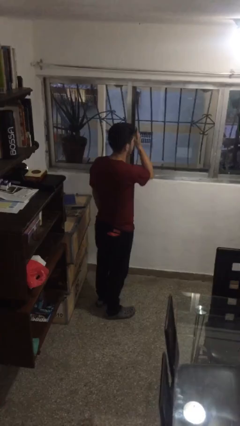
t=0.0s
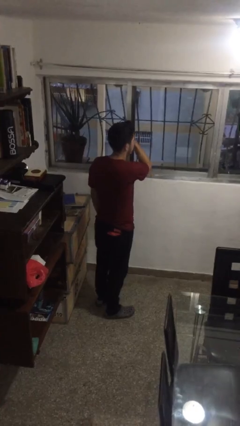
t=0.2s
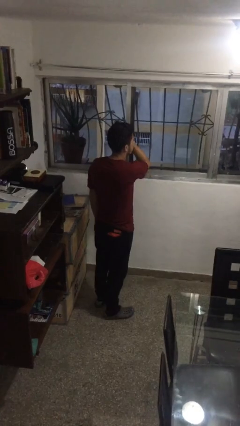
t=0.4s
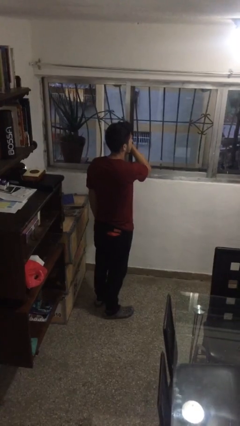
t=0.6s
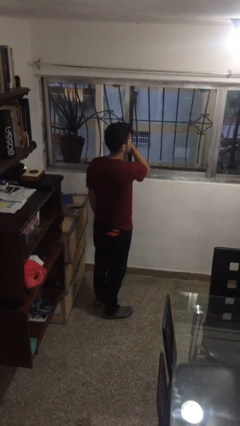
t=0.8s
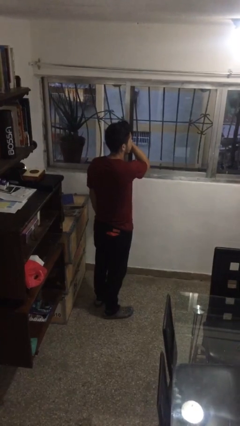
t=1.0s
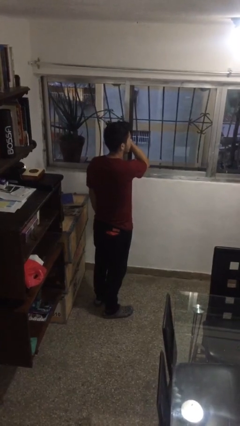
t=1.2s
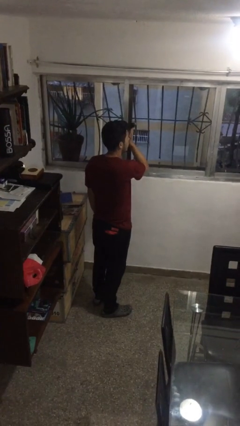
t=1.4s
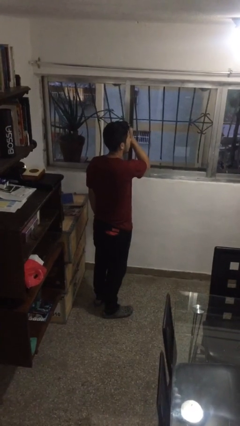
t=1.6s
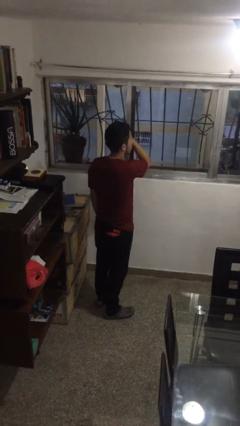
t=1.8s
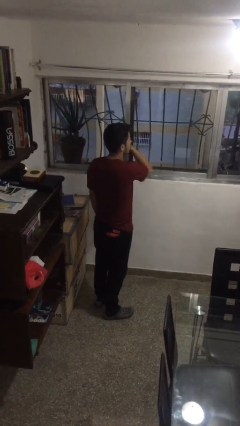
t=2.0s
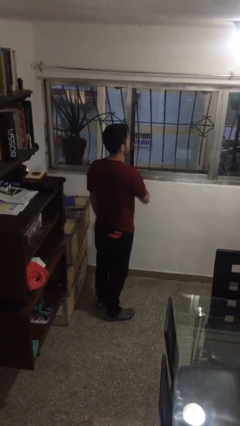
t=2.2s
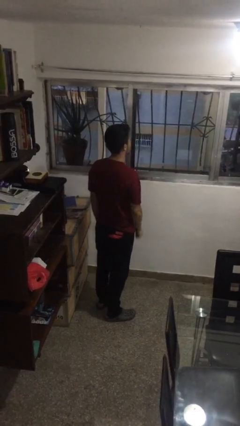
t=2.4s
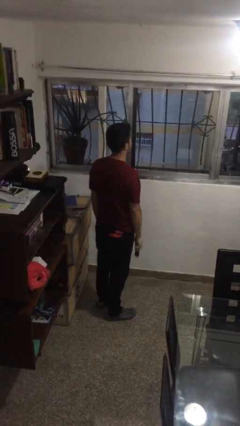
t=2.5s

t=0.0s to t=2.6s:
person brushes hair

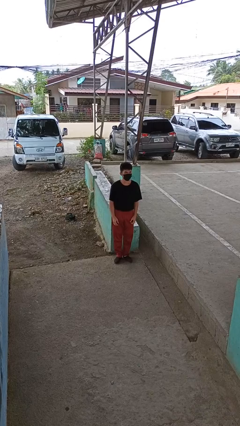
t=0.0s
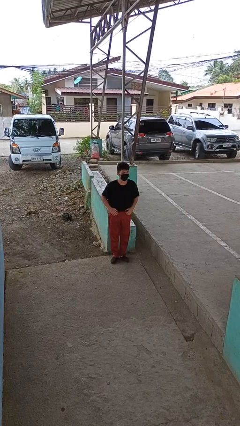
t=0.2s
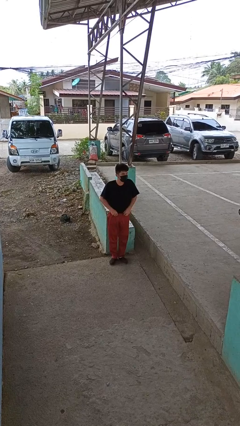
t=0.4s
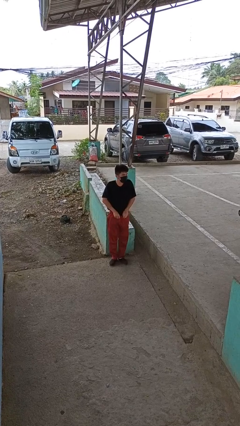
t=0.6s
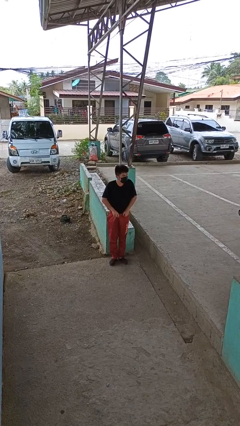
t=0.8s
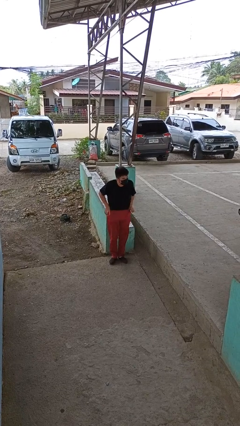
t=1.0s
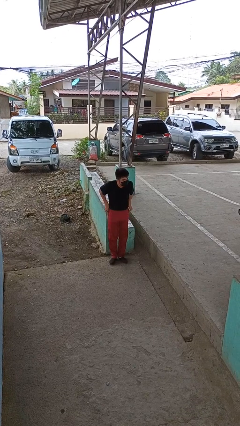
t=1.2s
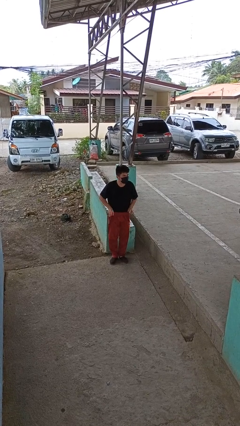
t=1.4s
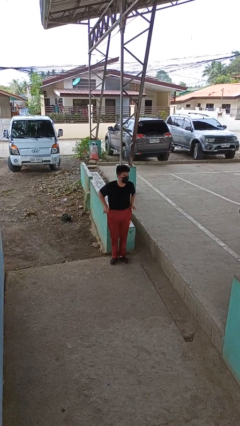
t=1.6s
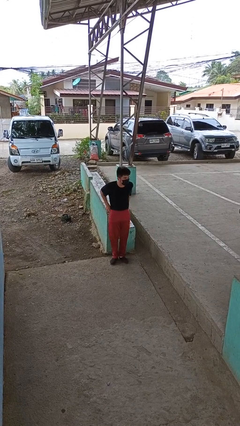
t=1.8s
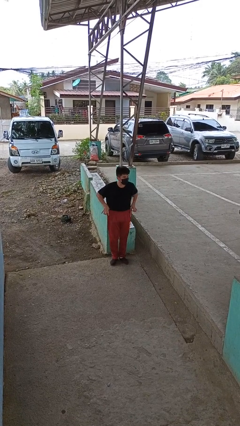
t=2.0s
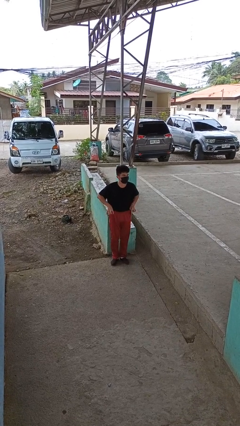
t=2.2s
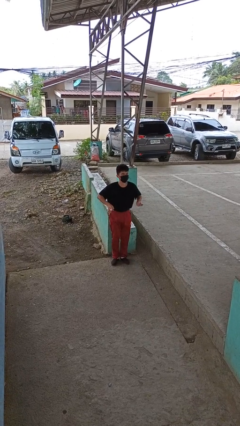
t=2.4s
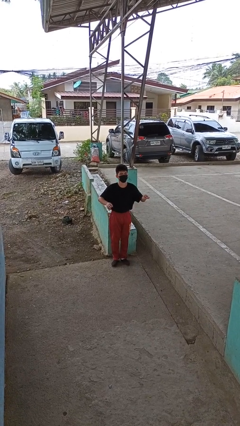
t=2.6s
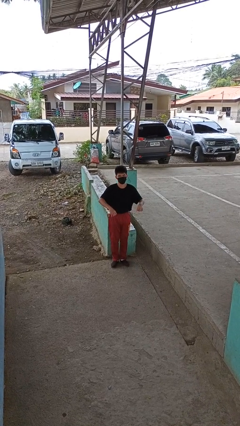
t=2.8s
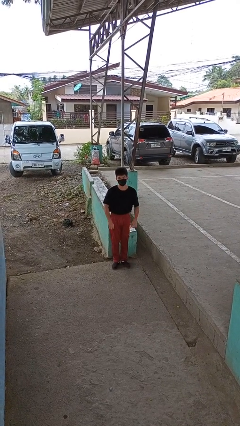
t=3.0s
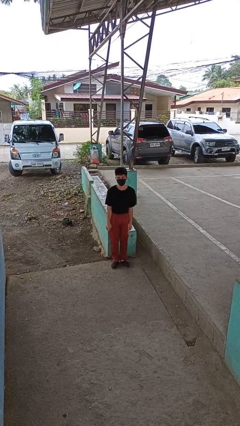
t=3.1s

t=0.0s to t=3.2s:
person hikes up pants

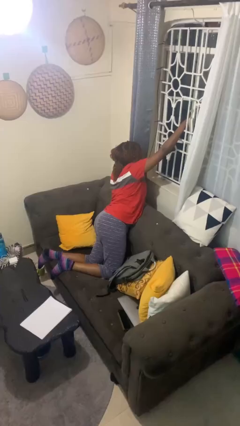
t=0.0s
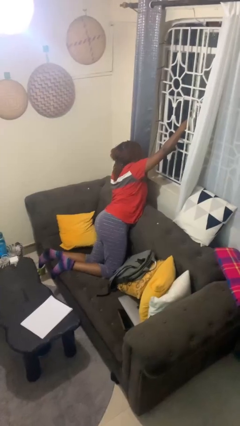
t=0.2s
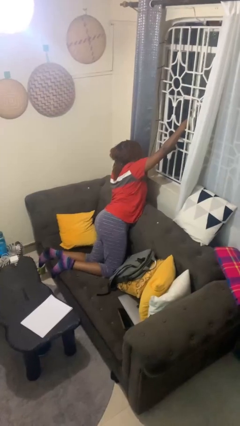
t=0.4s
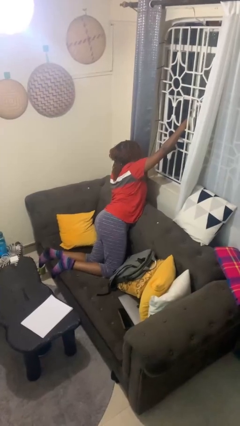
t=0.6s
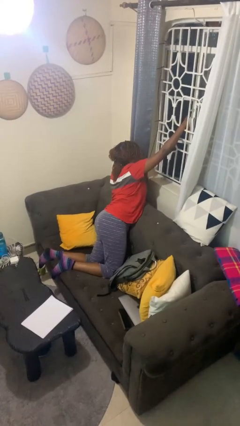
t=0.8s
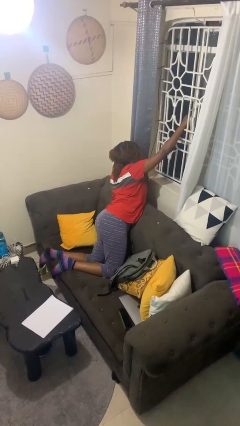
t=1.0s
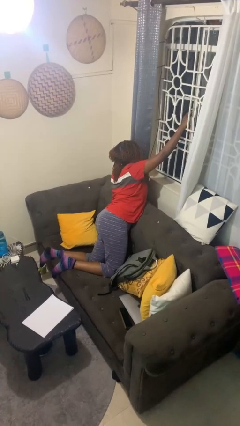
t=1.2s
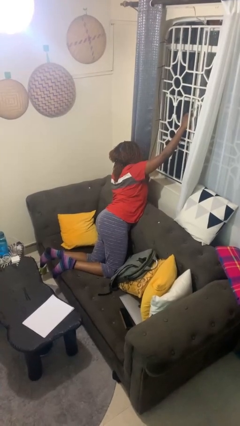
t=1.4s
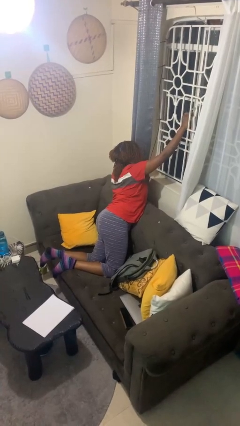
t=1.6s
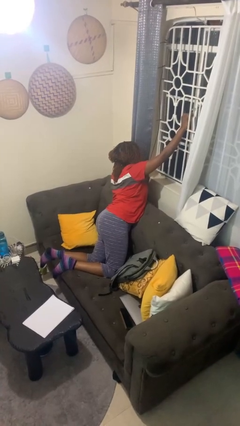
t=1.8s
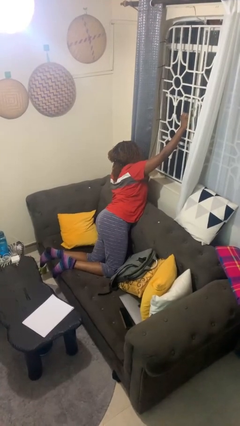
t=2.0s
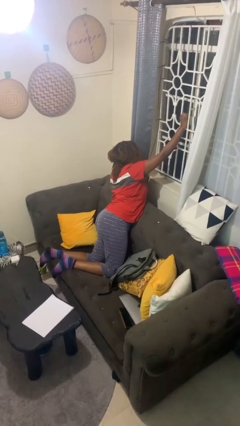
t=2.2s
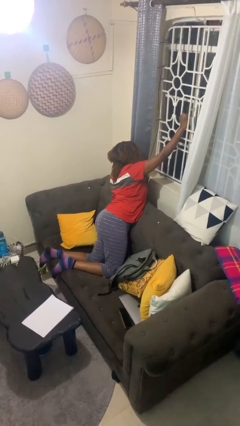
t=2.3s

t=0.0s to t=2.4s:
person closes home window

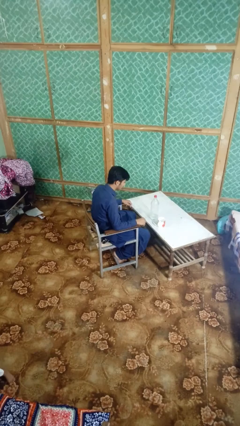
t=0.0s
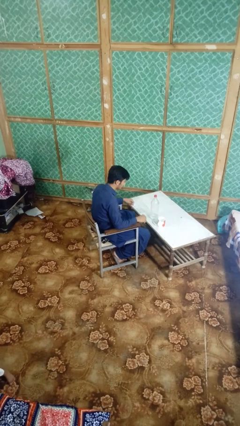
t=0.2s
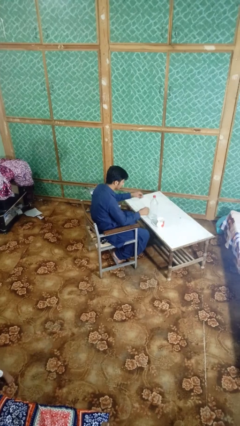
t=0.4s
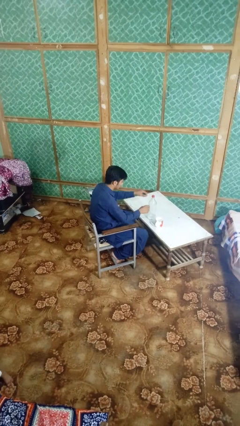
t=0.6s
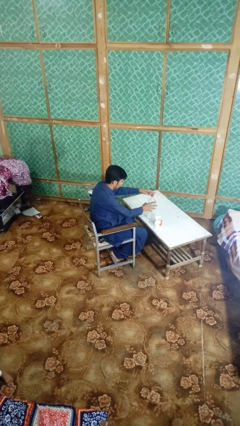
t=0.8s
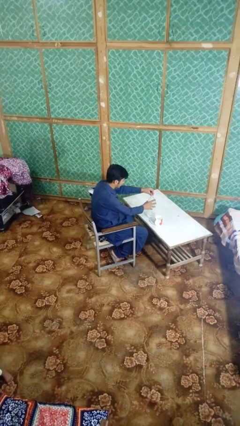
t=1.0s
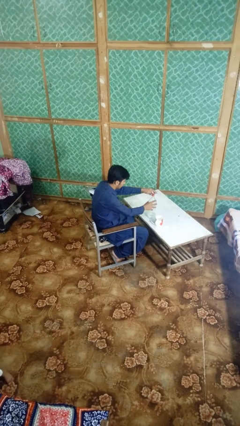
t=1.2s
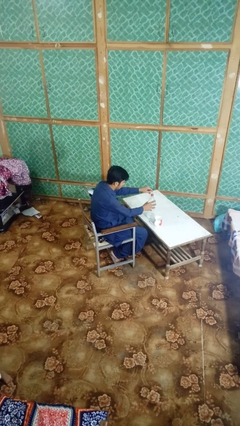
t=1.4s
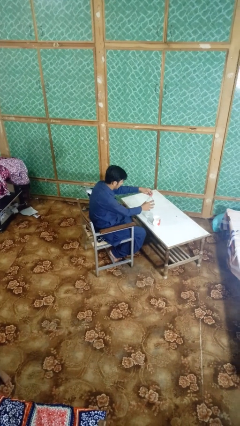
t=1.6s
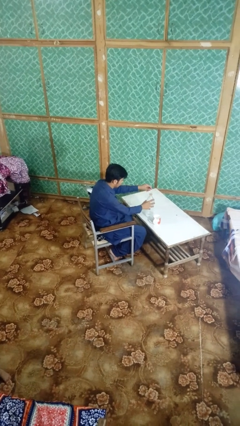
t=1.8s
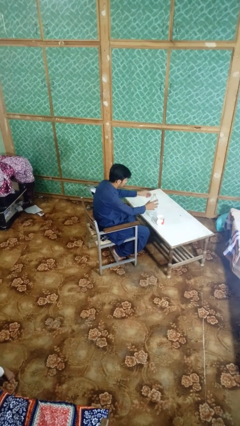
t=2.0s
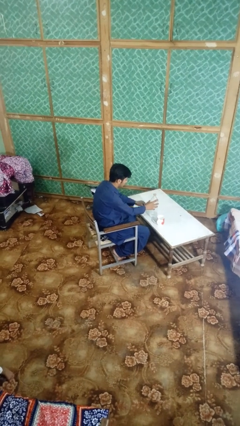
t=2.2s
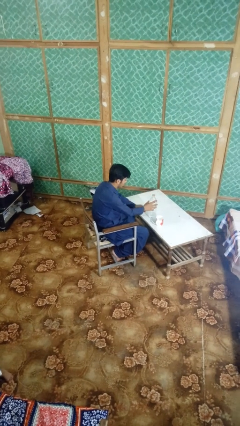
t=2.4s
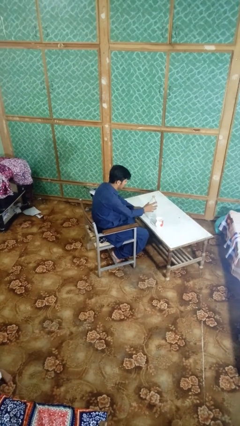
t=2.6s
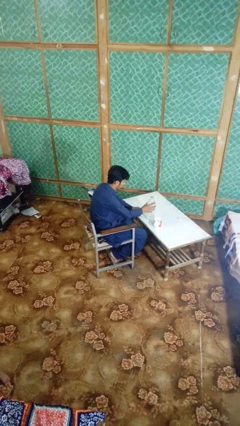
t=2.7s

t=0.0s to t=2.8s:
person unscrews lid from bottle

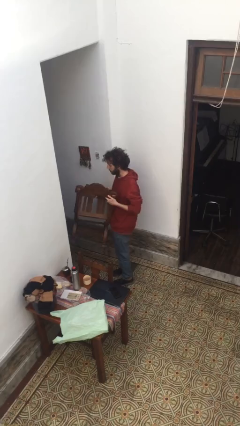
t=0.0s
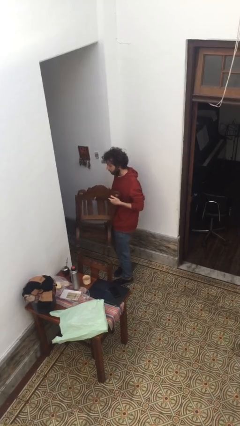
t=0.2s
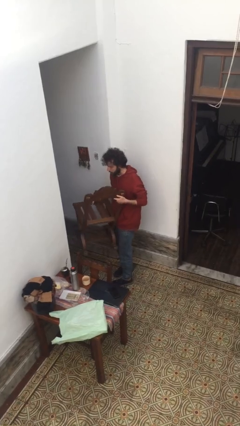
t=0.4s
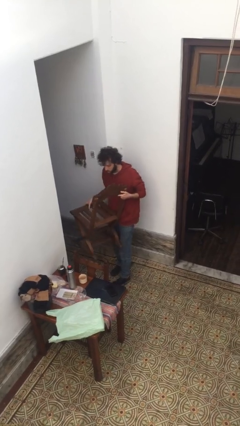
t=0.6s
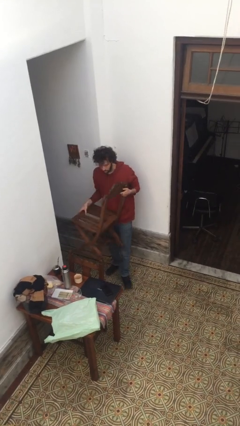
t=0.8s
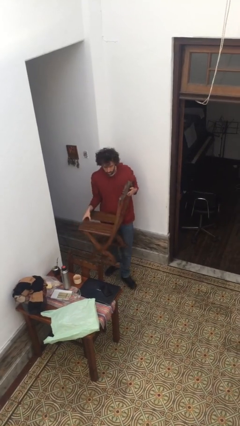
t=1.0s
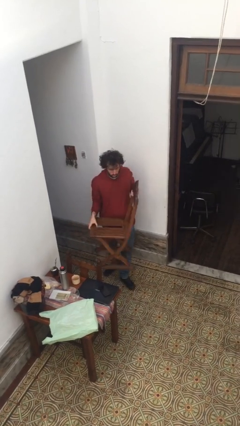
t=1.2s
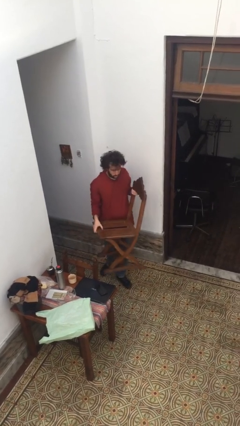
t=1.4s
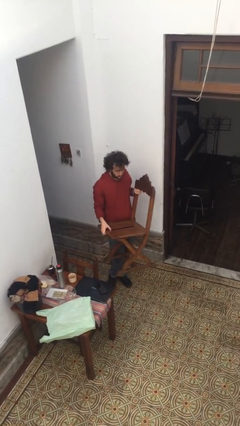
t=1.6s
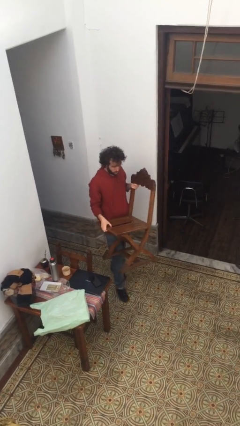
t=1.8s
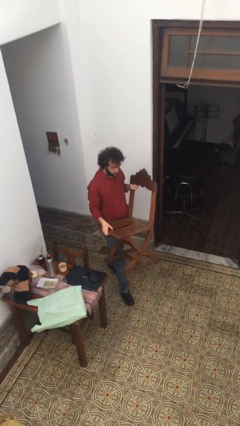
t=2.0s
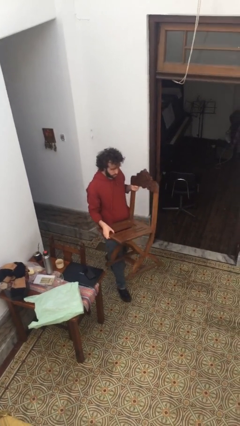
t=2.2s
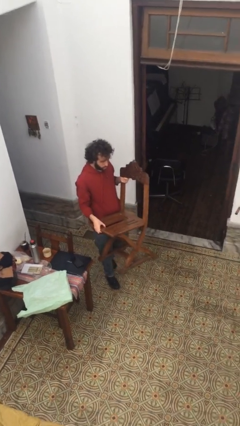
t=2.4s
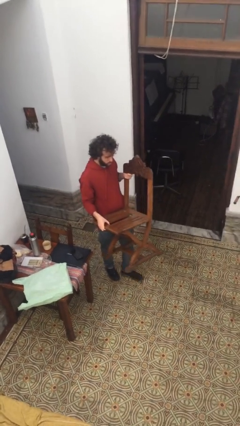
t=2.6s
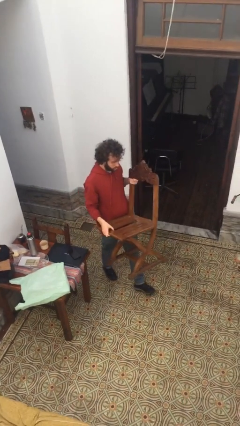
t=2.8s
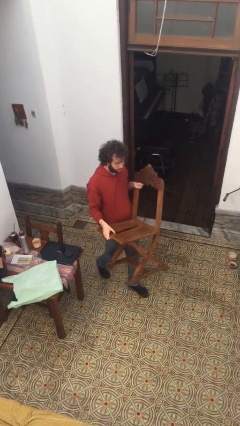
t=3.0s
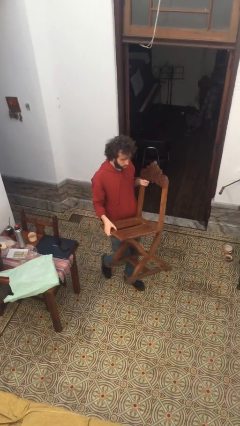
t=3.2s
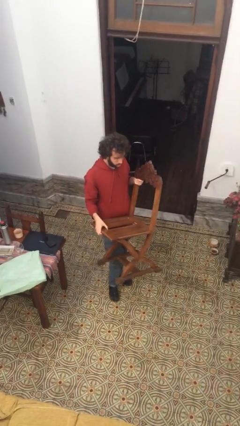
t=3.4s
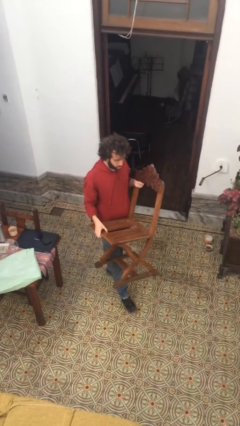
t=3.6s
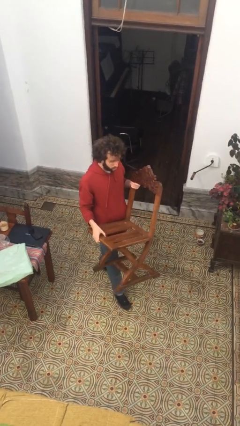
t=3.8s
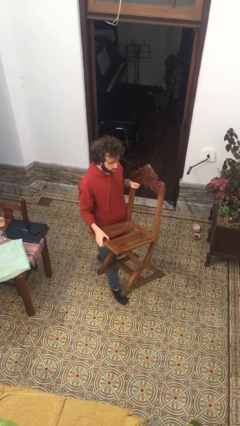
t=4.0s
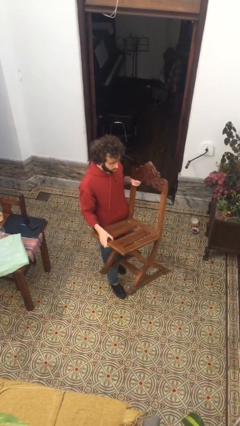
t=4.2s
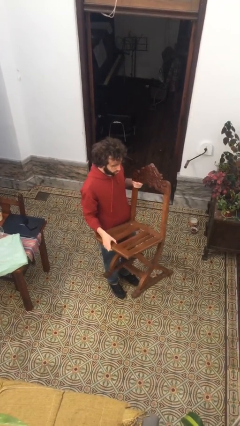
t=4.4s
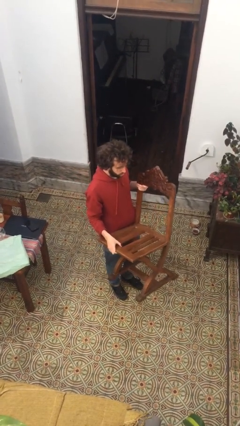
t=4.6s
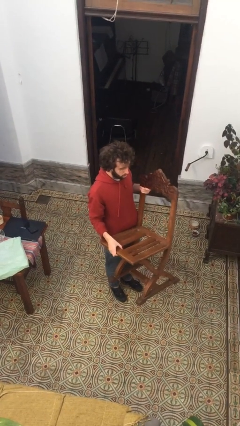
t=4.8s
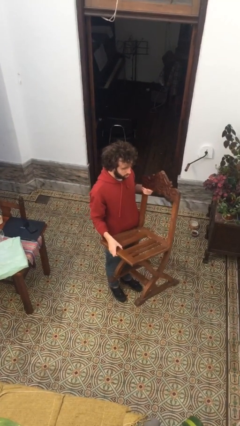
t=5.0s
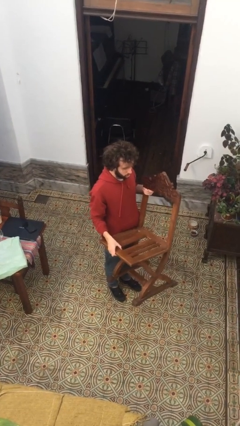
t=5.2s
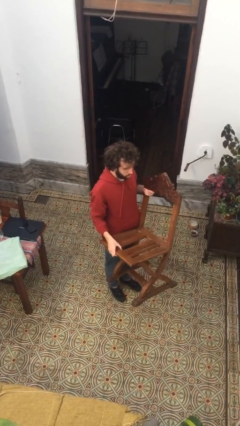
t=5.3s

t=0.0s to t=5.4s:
person carries furniture

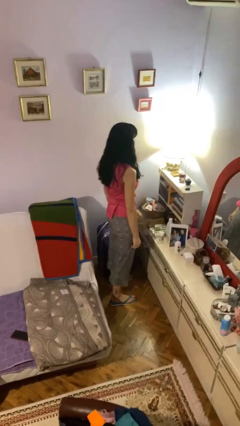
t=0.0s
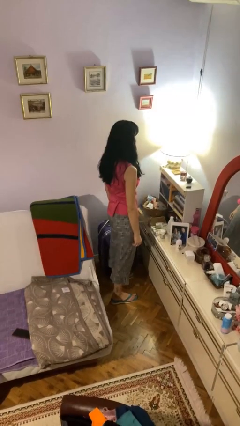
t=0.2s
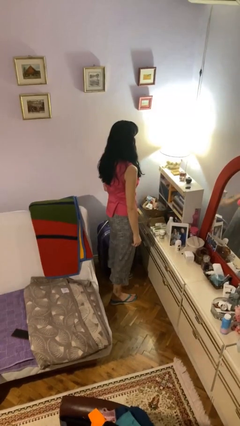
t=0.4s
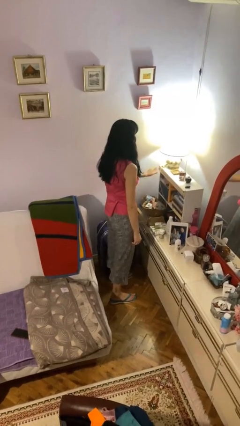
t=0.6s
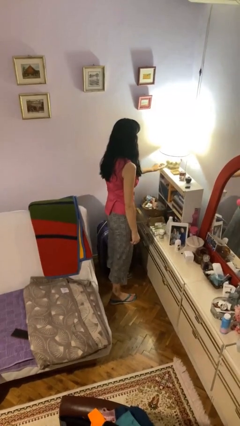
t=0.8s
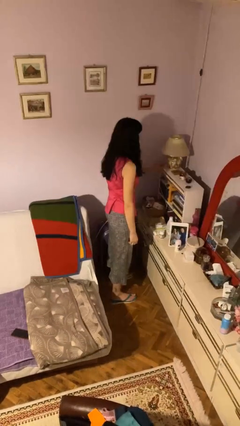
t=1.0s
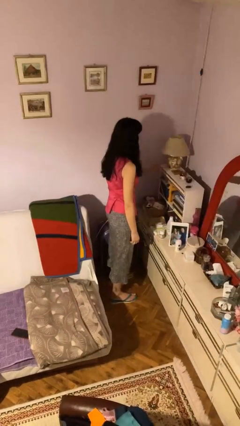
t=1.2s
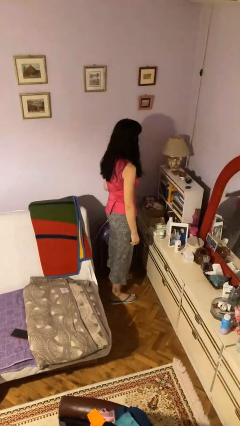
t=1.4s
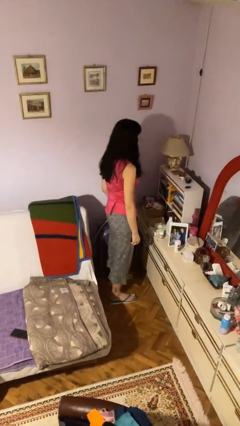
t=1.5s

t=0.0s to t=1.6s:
person turns off lamp
